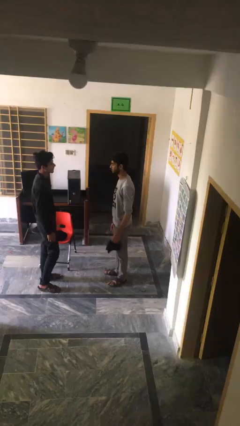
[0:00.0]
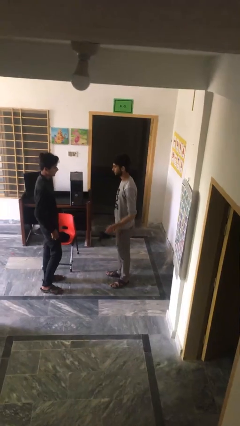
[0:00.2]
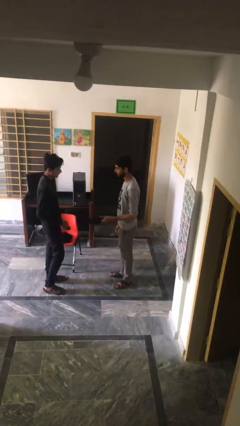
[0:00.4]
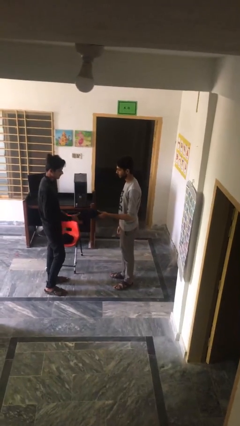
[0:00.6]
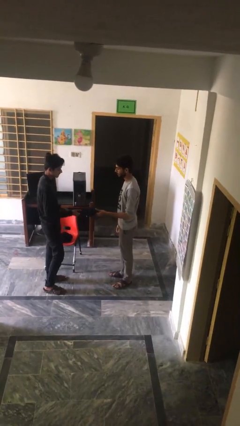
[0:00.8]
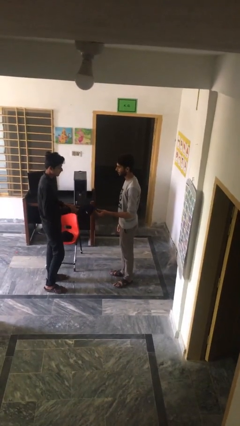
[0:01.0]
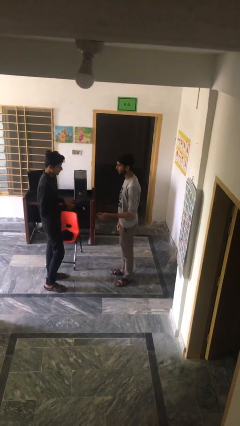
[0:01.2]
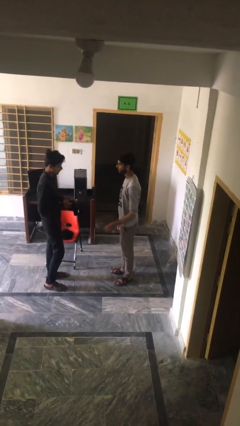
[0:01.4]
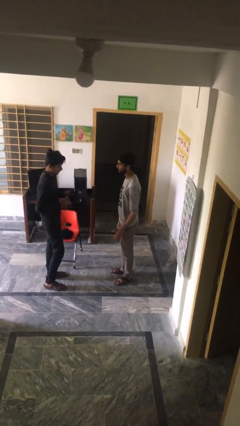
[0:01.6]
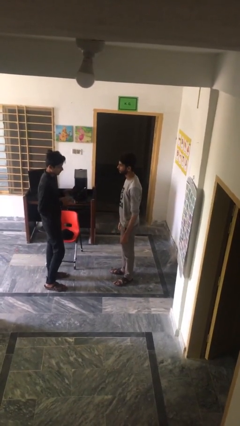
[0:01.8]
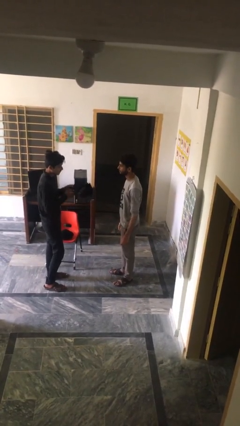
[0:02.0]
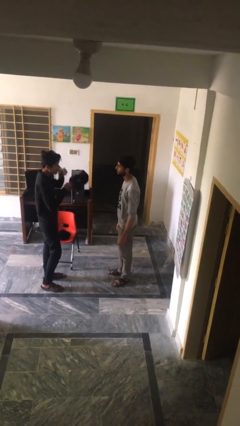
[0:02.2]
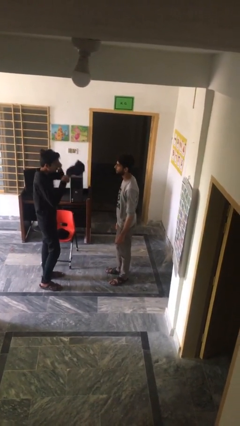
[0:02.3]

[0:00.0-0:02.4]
person transfers object to person

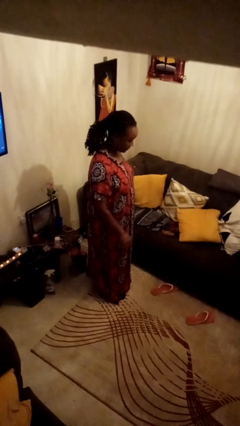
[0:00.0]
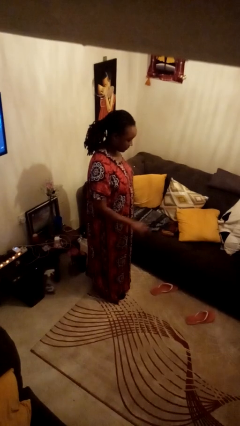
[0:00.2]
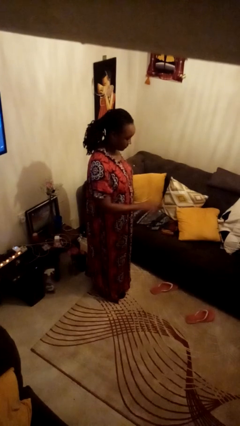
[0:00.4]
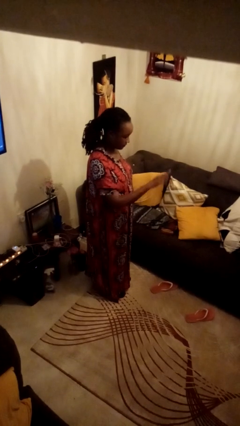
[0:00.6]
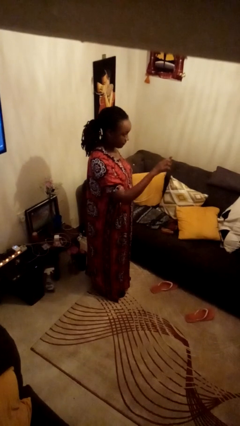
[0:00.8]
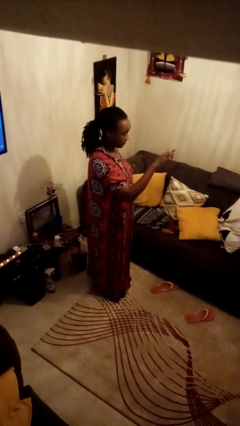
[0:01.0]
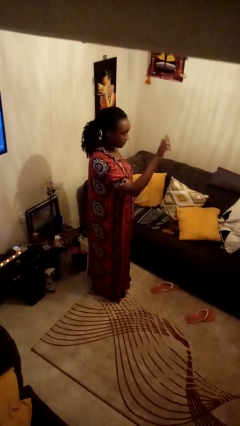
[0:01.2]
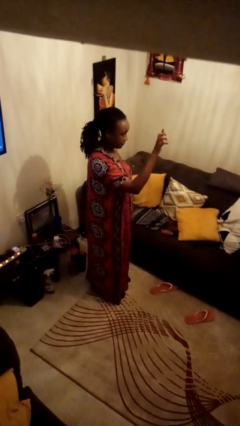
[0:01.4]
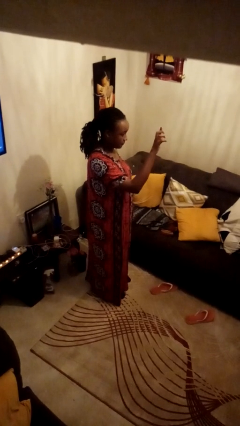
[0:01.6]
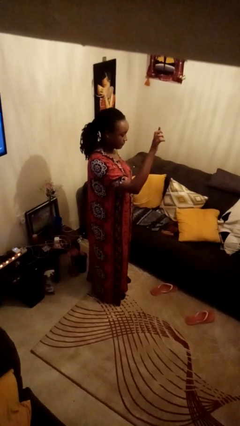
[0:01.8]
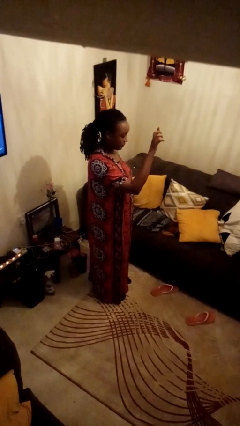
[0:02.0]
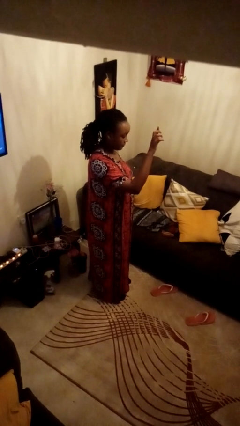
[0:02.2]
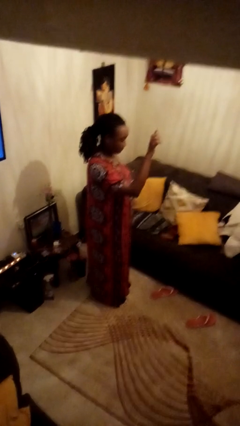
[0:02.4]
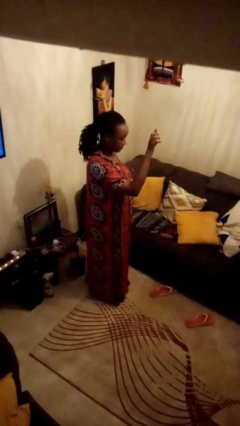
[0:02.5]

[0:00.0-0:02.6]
person gestures swipe up

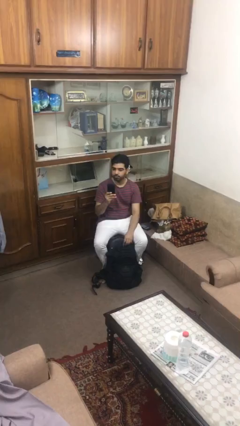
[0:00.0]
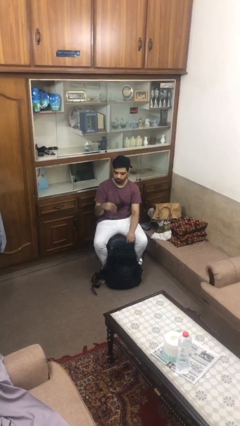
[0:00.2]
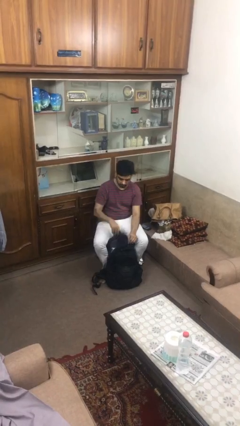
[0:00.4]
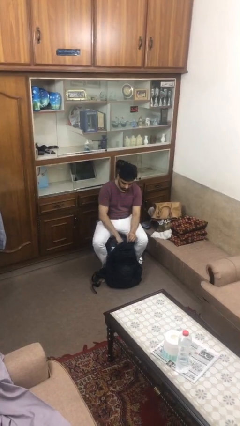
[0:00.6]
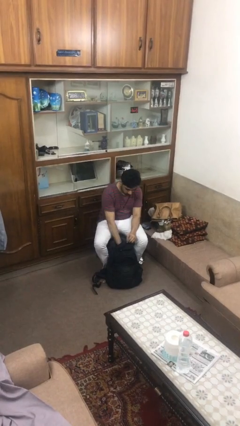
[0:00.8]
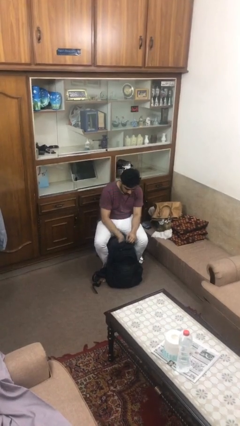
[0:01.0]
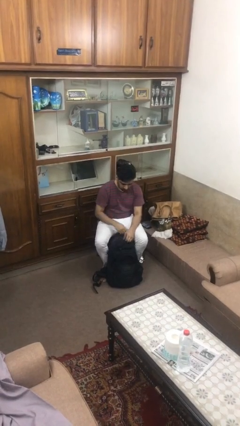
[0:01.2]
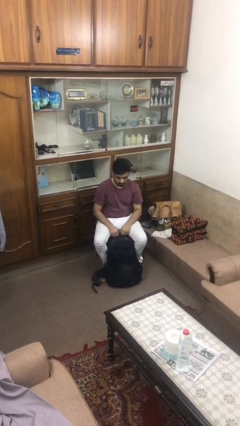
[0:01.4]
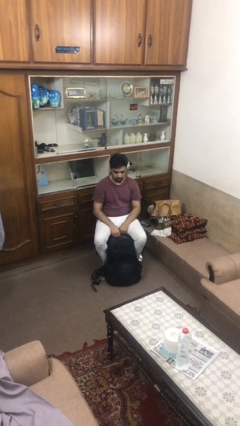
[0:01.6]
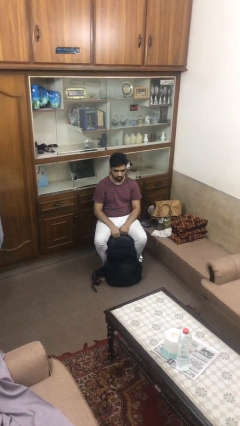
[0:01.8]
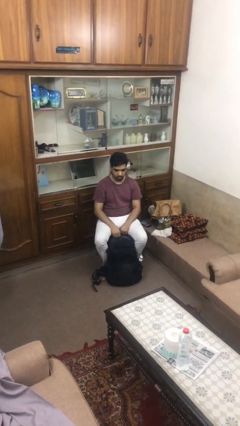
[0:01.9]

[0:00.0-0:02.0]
person puts object into backpack

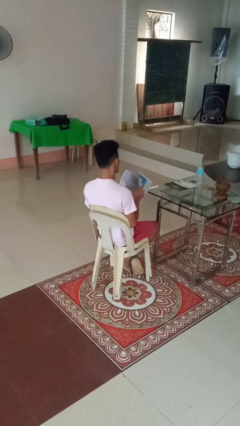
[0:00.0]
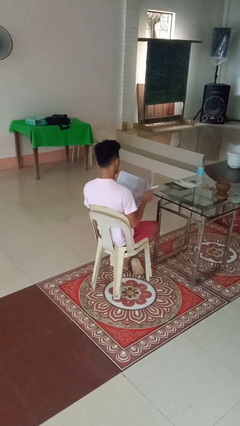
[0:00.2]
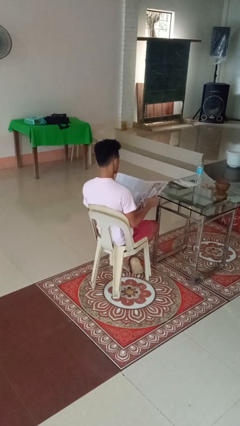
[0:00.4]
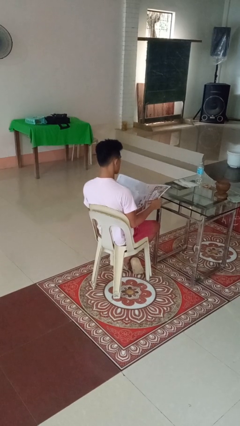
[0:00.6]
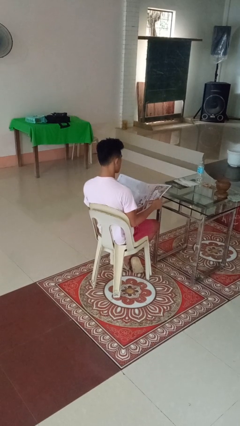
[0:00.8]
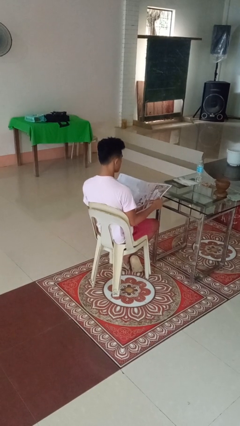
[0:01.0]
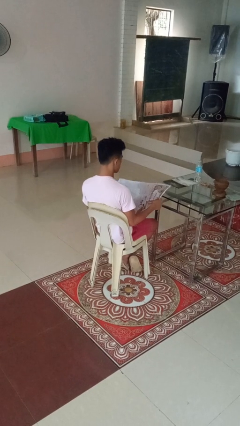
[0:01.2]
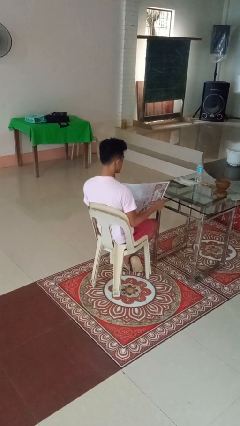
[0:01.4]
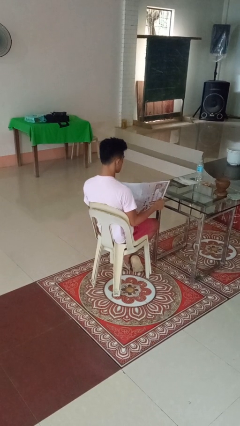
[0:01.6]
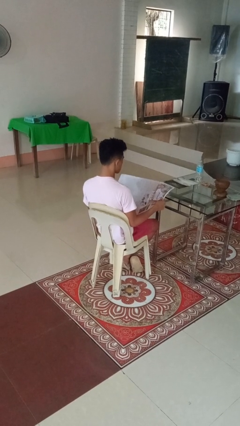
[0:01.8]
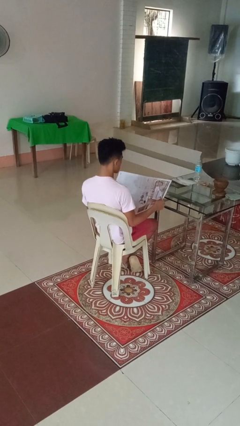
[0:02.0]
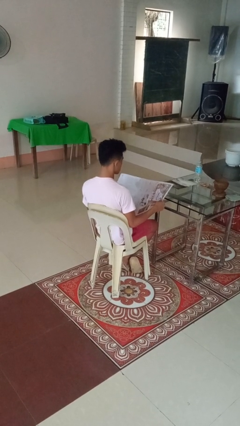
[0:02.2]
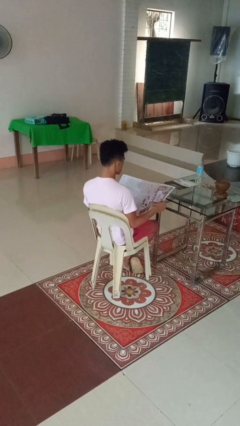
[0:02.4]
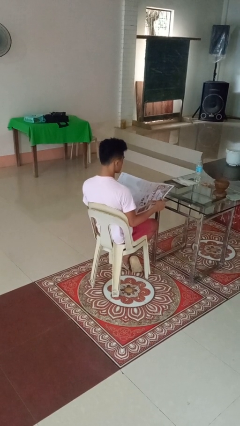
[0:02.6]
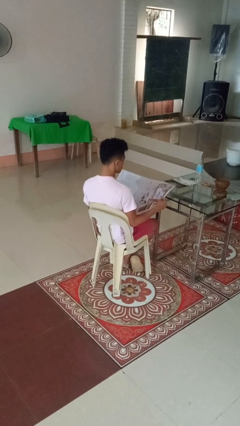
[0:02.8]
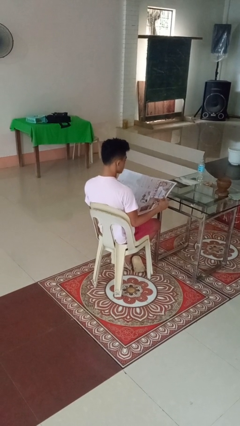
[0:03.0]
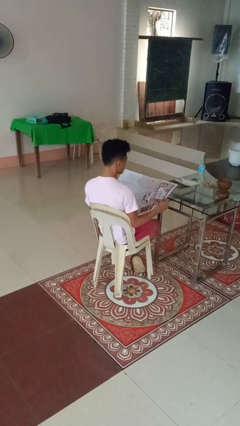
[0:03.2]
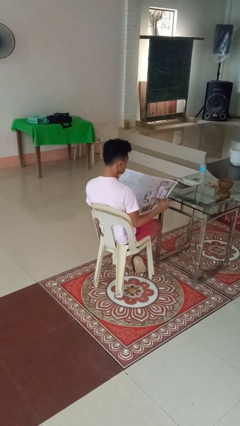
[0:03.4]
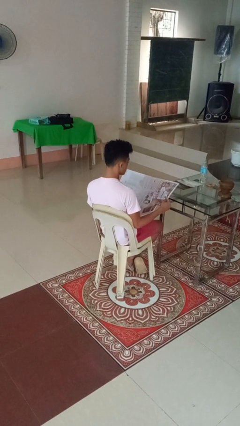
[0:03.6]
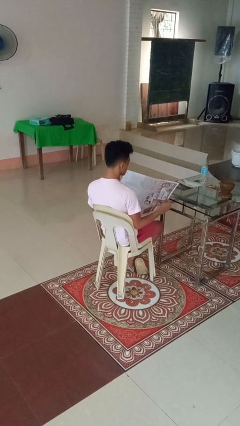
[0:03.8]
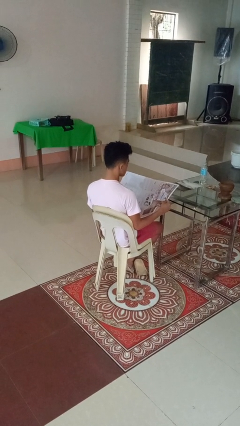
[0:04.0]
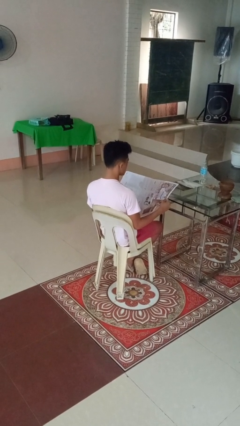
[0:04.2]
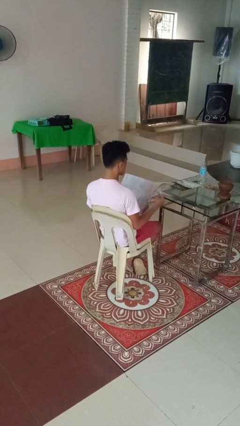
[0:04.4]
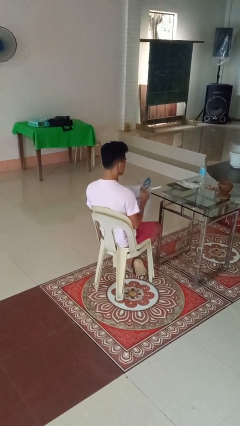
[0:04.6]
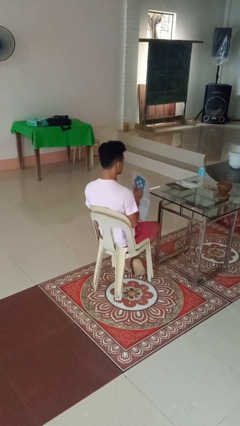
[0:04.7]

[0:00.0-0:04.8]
person reads newspaper

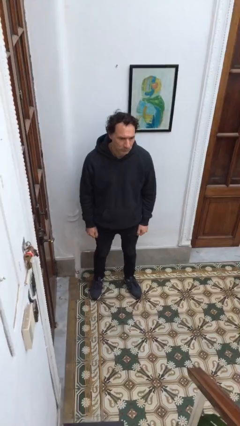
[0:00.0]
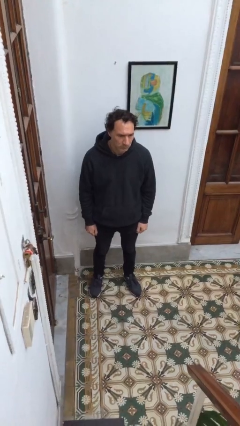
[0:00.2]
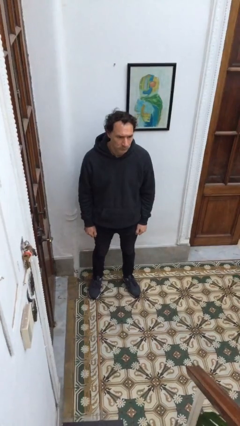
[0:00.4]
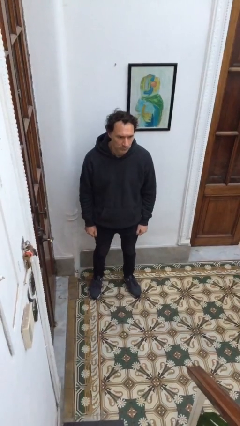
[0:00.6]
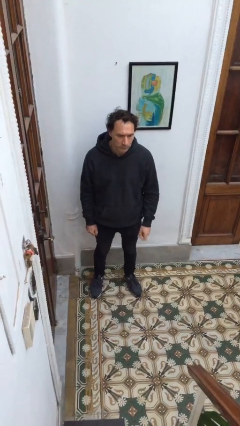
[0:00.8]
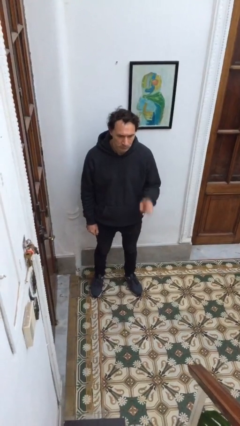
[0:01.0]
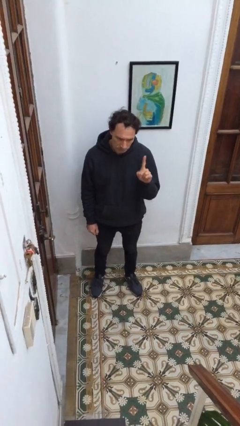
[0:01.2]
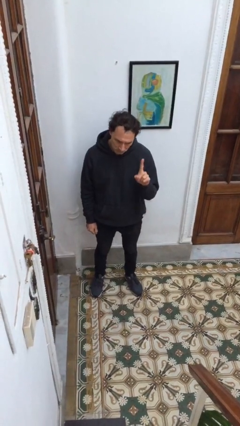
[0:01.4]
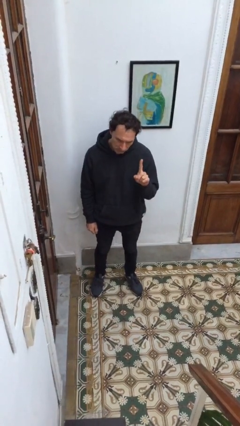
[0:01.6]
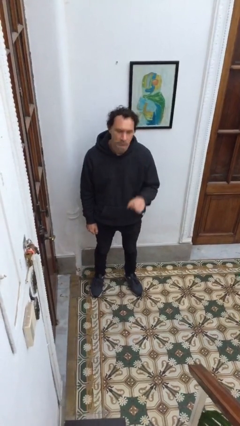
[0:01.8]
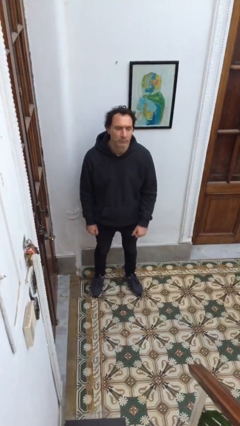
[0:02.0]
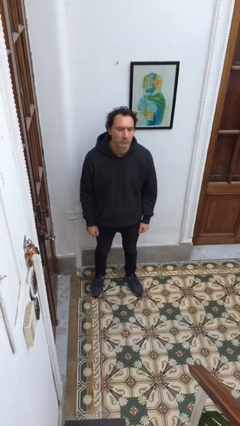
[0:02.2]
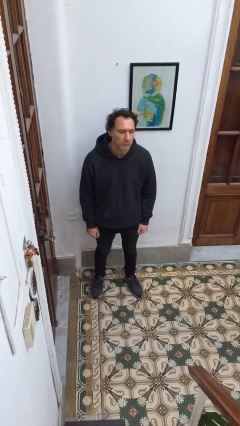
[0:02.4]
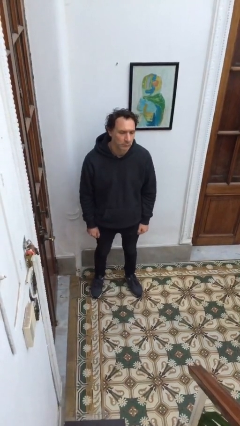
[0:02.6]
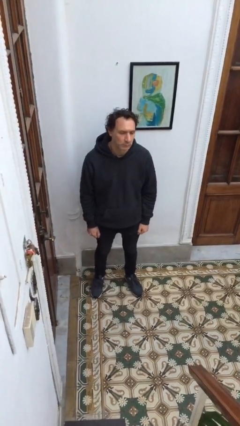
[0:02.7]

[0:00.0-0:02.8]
person gestures number one

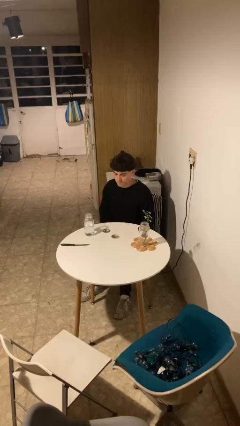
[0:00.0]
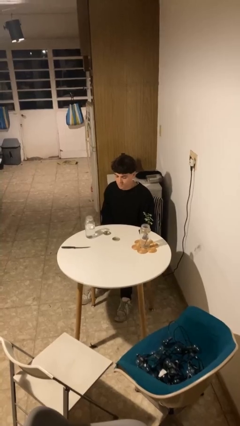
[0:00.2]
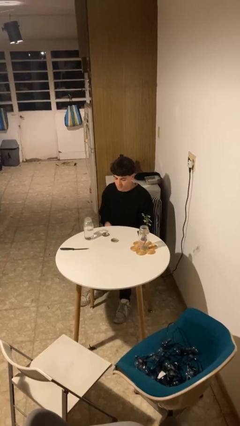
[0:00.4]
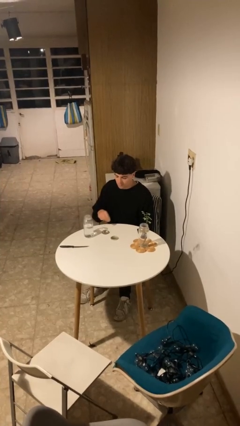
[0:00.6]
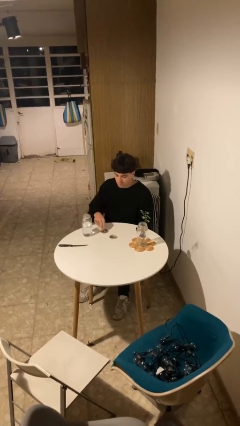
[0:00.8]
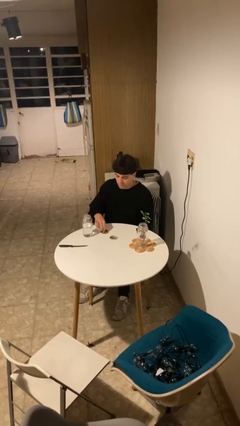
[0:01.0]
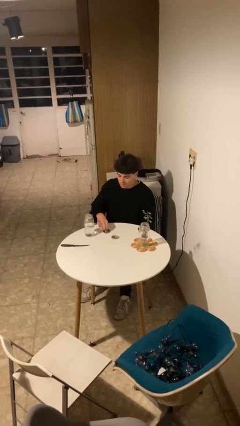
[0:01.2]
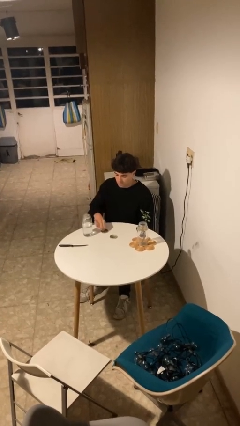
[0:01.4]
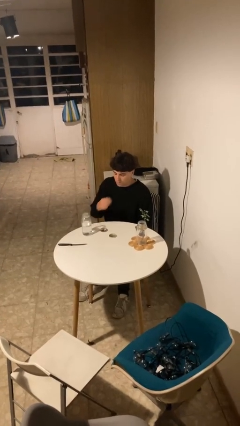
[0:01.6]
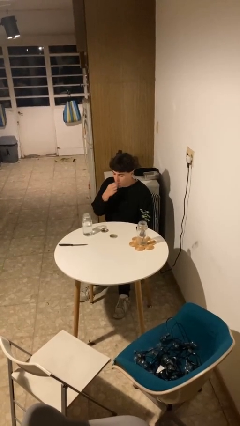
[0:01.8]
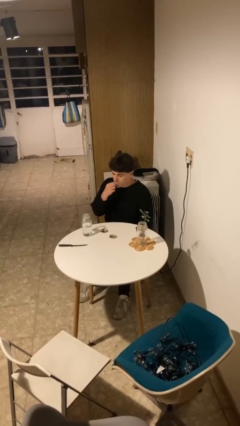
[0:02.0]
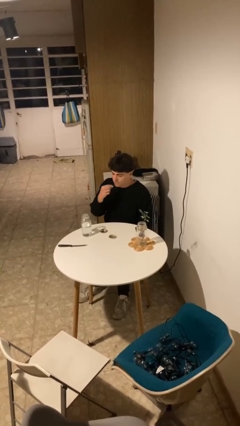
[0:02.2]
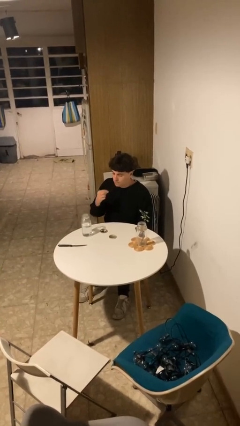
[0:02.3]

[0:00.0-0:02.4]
person takes medicine pills

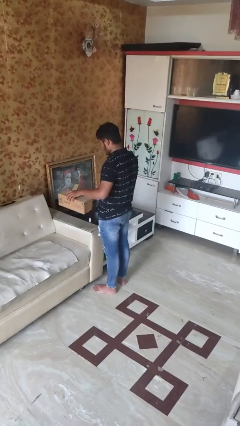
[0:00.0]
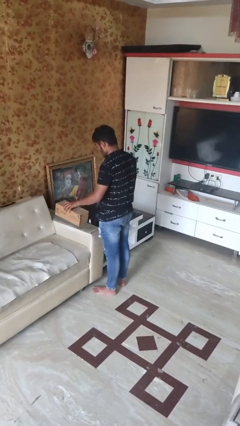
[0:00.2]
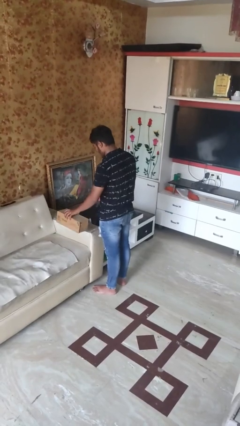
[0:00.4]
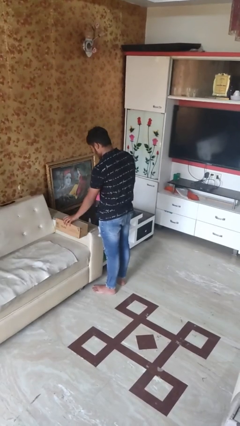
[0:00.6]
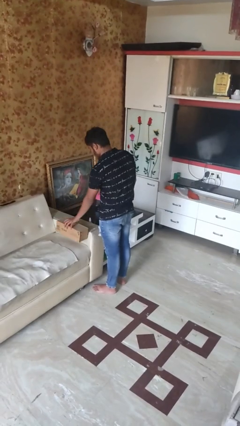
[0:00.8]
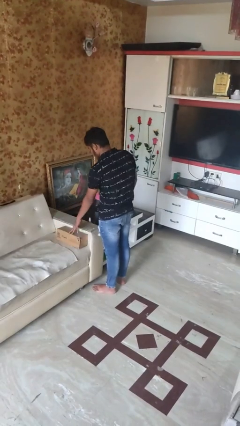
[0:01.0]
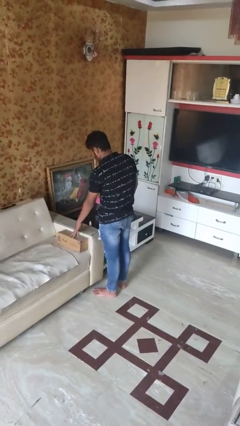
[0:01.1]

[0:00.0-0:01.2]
person puts down object on couch
